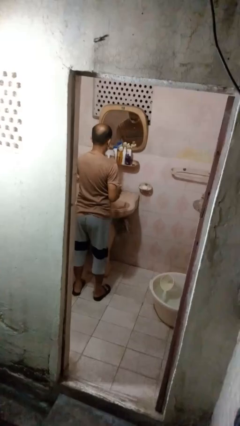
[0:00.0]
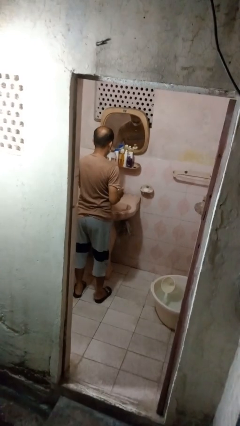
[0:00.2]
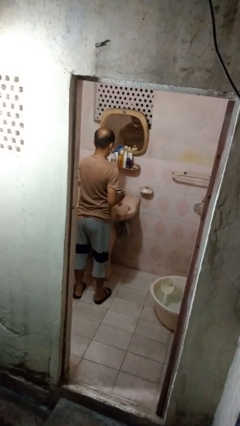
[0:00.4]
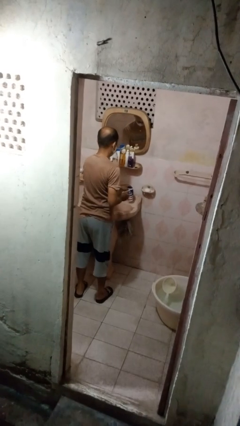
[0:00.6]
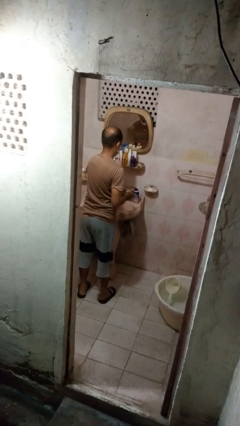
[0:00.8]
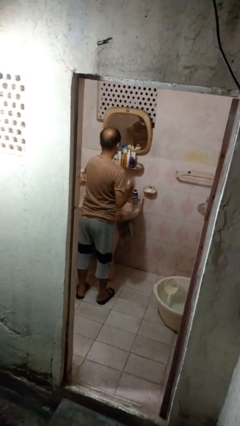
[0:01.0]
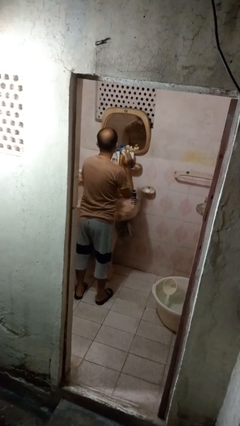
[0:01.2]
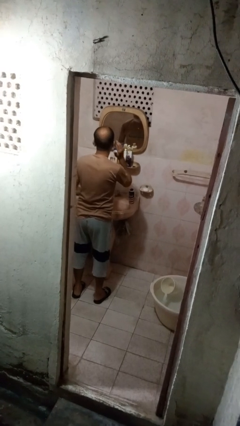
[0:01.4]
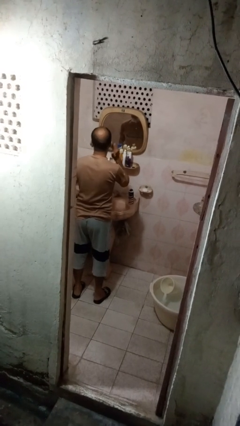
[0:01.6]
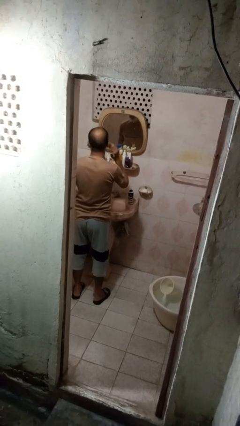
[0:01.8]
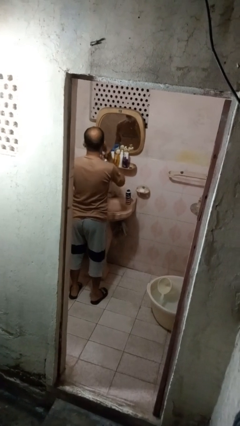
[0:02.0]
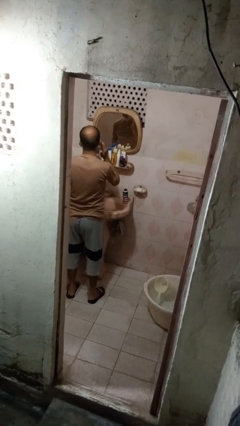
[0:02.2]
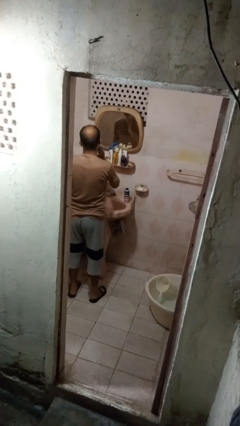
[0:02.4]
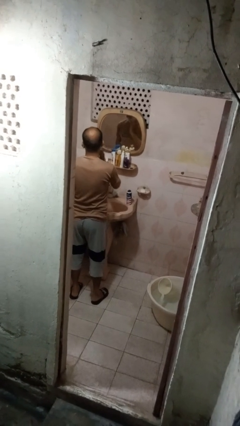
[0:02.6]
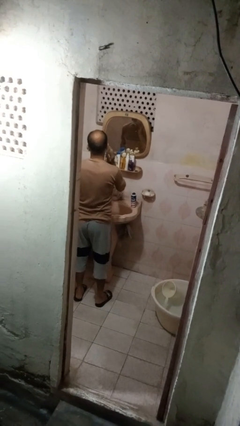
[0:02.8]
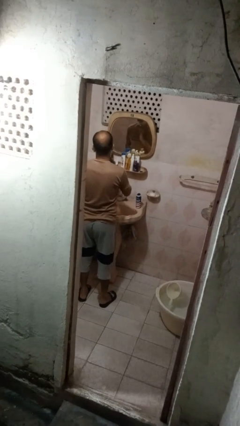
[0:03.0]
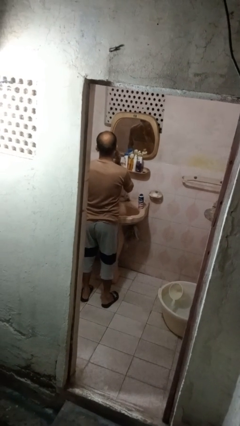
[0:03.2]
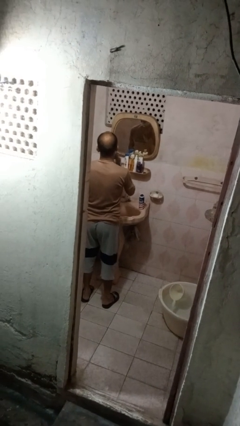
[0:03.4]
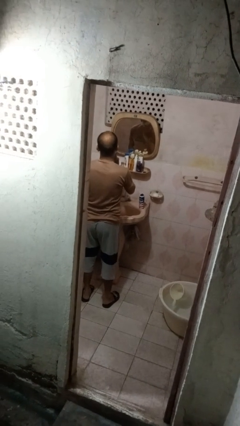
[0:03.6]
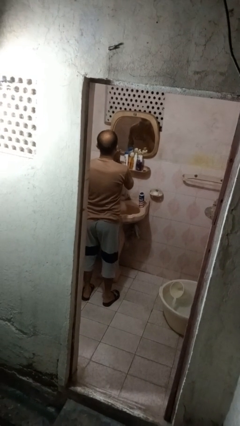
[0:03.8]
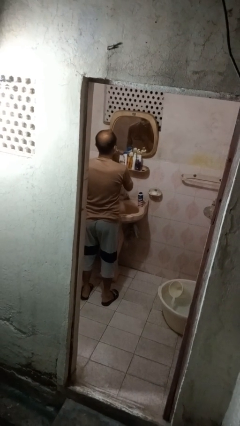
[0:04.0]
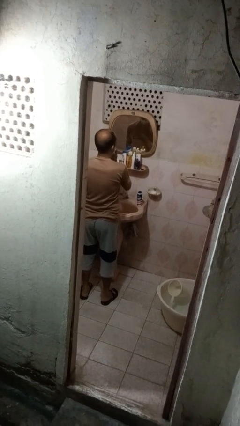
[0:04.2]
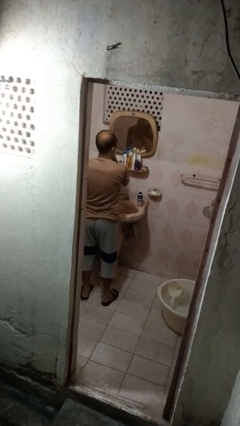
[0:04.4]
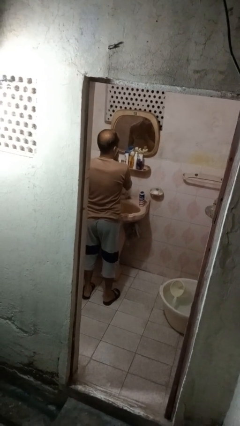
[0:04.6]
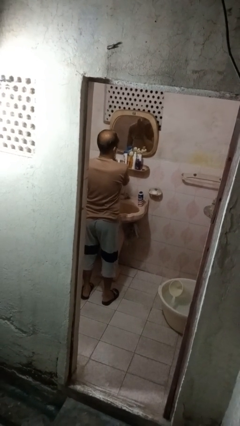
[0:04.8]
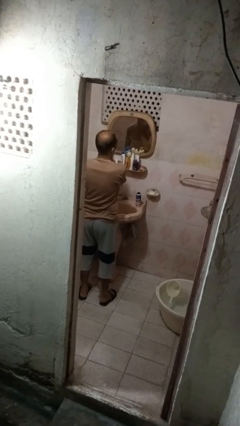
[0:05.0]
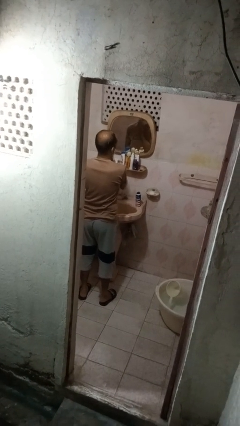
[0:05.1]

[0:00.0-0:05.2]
person applies shaving cream

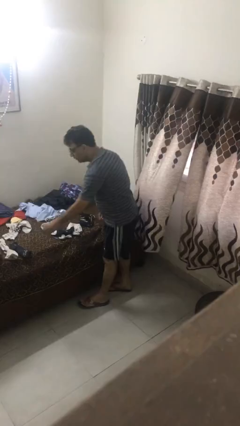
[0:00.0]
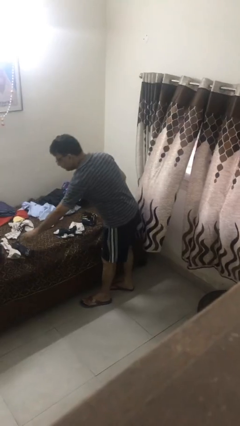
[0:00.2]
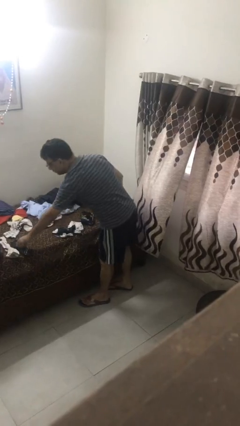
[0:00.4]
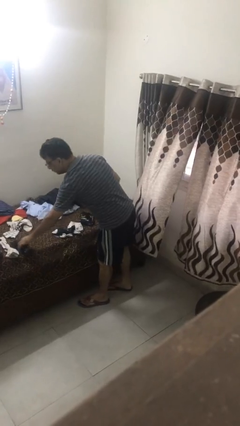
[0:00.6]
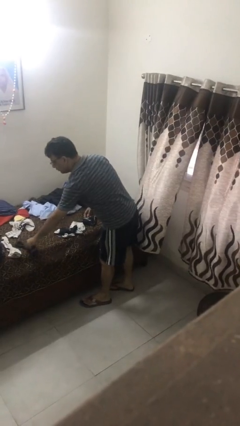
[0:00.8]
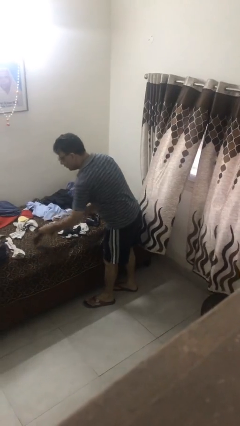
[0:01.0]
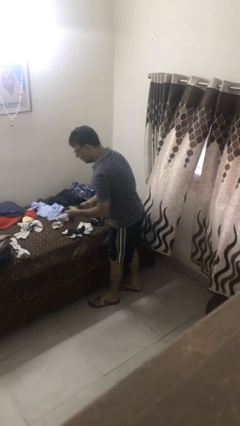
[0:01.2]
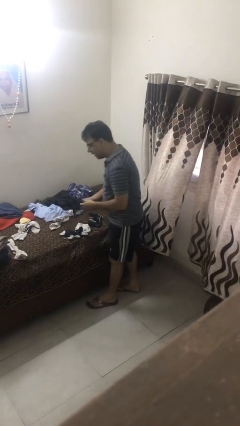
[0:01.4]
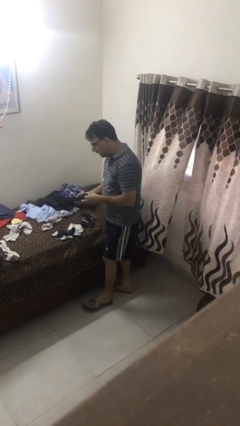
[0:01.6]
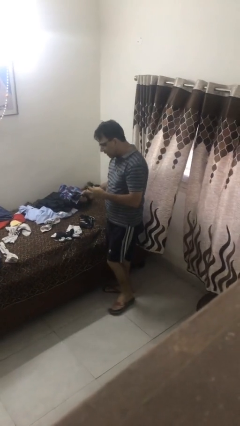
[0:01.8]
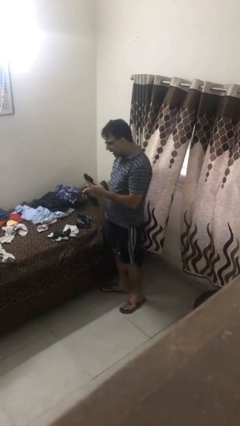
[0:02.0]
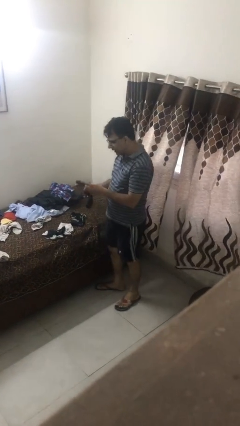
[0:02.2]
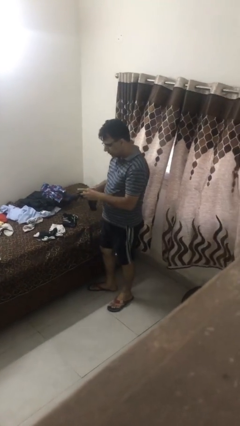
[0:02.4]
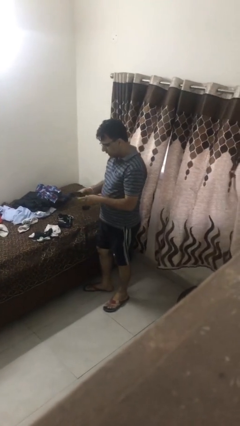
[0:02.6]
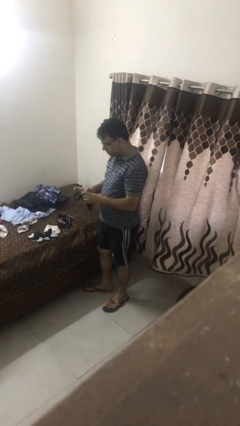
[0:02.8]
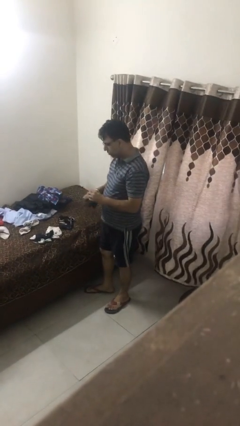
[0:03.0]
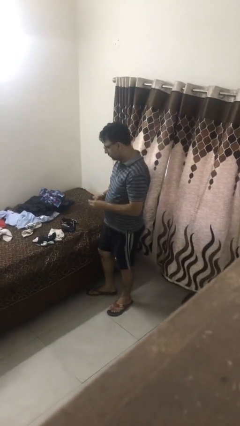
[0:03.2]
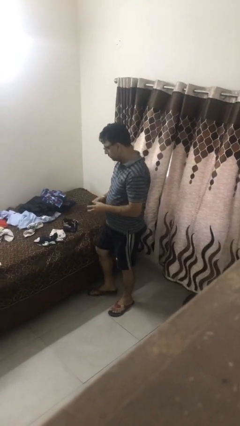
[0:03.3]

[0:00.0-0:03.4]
person folds socks

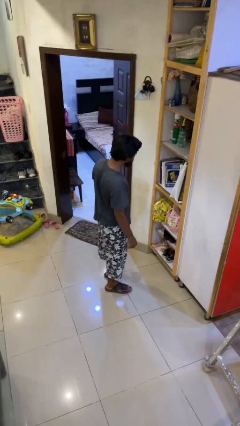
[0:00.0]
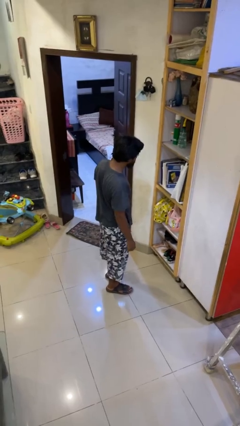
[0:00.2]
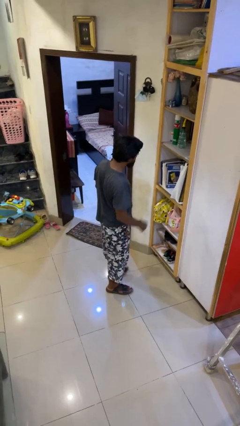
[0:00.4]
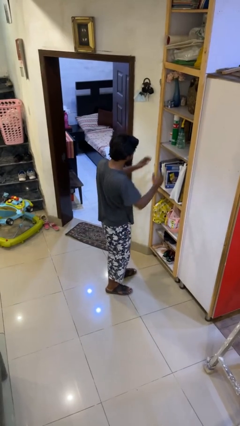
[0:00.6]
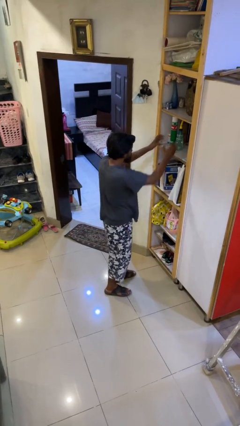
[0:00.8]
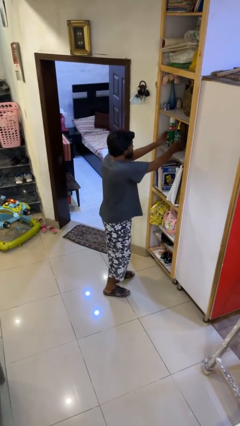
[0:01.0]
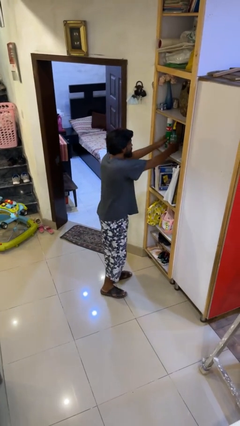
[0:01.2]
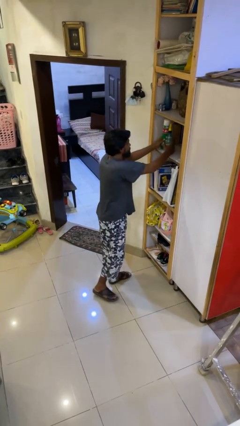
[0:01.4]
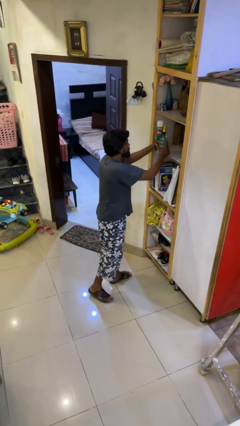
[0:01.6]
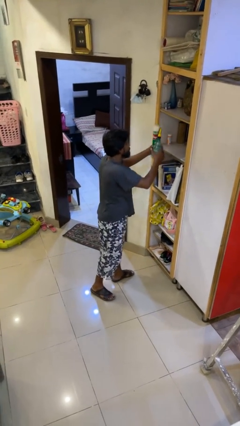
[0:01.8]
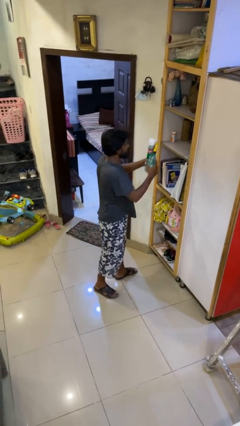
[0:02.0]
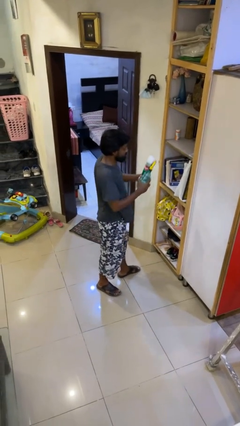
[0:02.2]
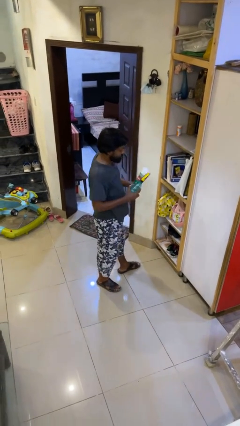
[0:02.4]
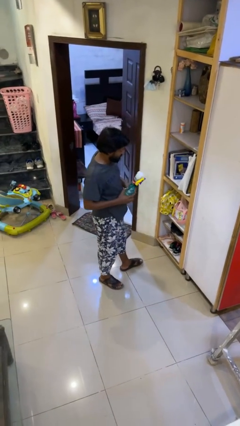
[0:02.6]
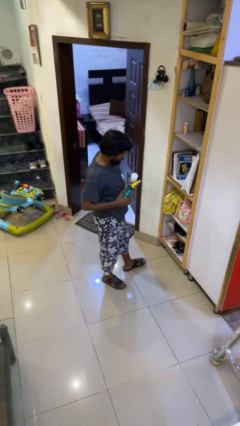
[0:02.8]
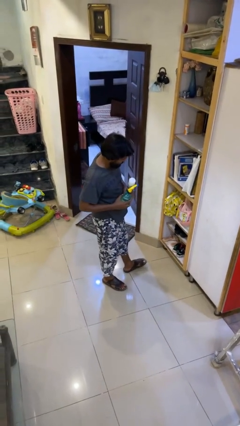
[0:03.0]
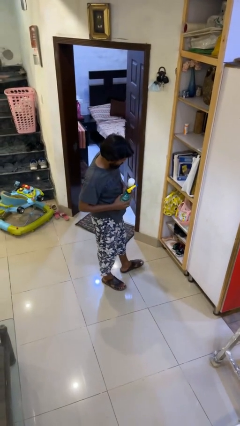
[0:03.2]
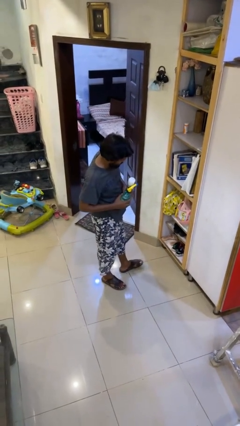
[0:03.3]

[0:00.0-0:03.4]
person picks up object from cabinet

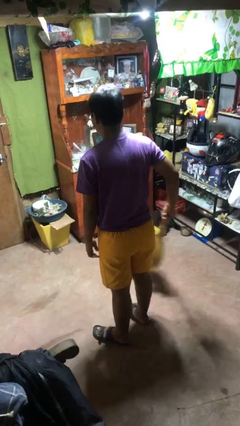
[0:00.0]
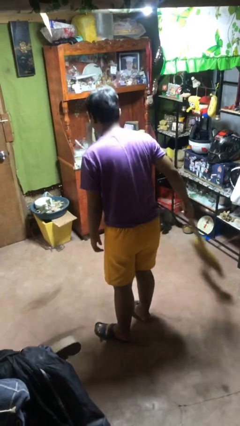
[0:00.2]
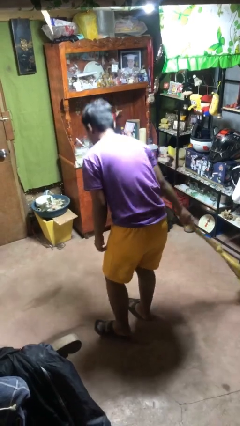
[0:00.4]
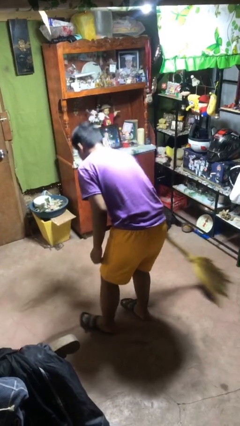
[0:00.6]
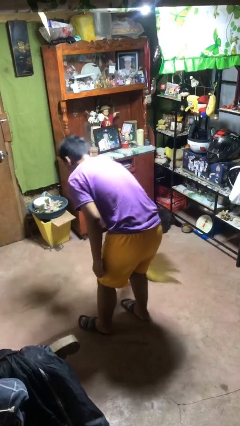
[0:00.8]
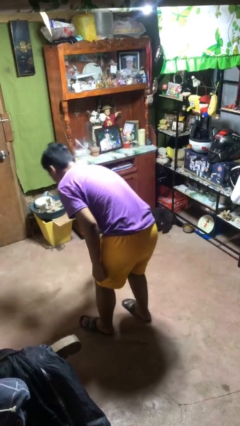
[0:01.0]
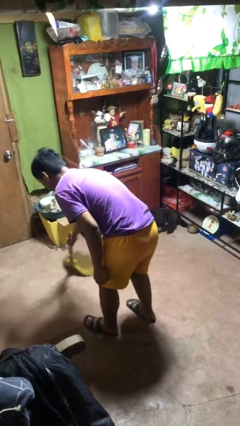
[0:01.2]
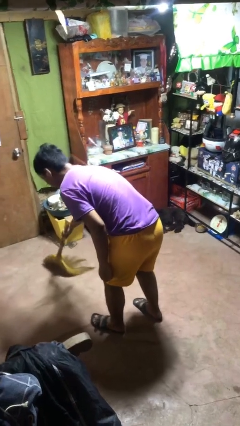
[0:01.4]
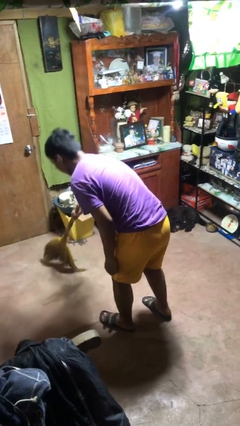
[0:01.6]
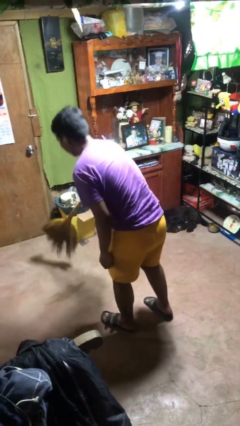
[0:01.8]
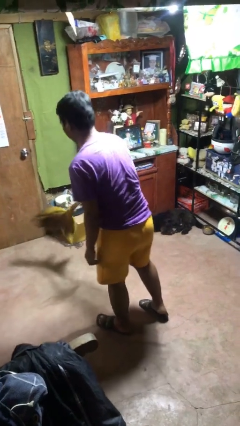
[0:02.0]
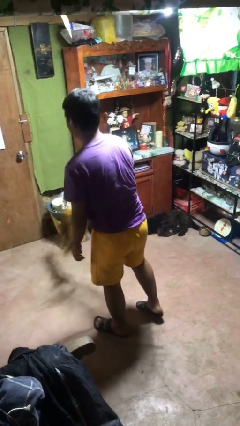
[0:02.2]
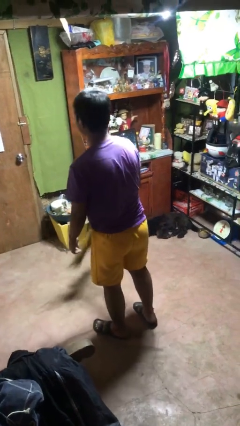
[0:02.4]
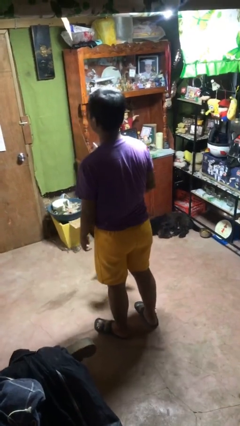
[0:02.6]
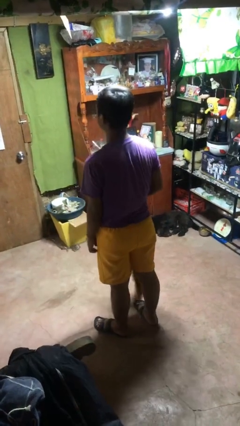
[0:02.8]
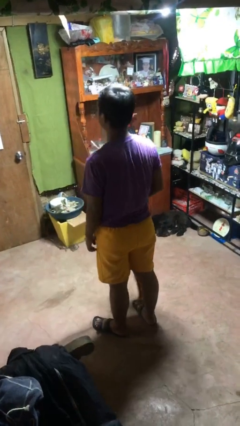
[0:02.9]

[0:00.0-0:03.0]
person sweeps floor

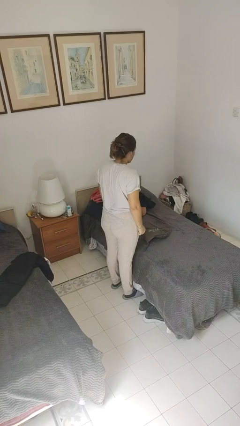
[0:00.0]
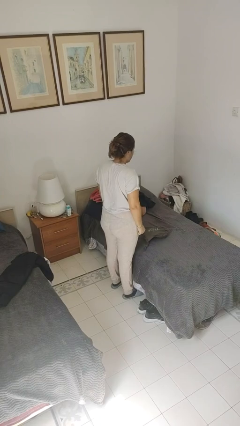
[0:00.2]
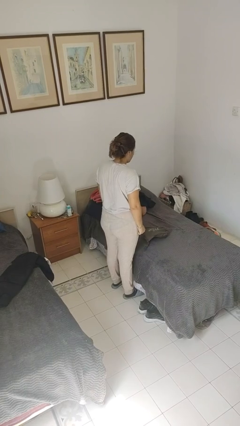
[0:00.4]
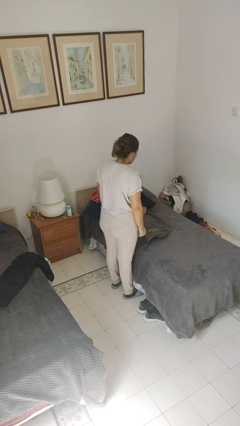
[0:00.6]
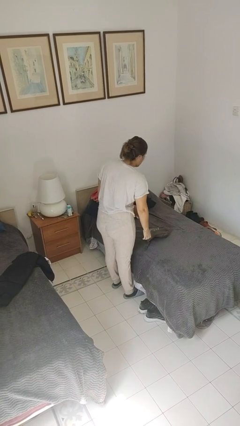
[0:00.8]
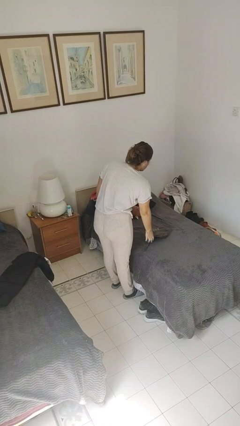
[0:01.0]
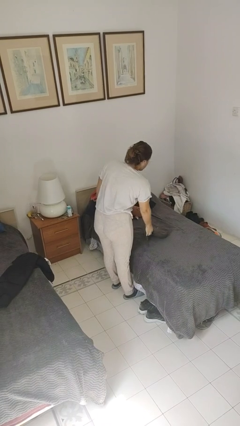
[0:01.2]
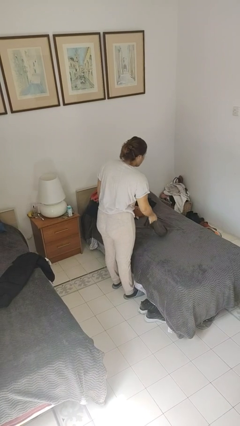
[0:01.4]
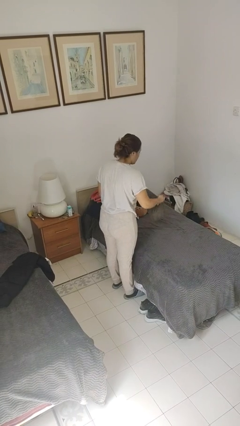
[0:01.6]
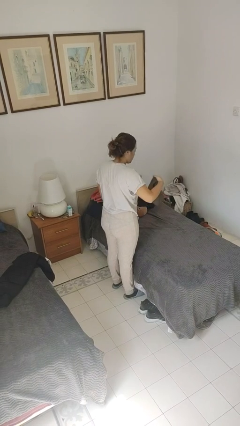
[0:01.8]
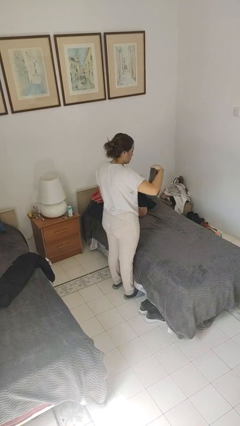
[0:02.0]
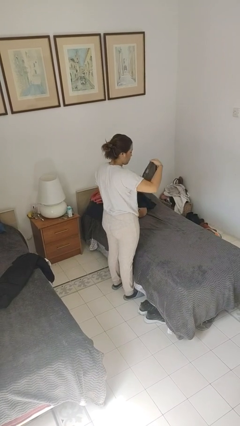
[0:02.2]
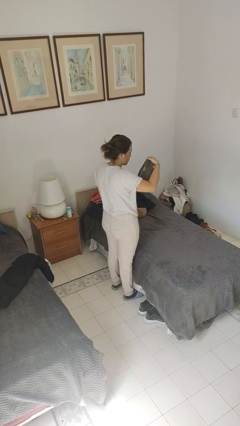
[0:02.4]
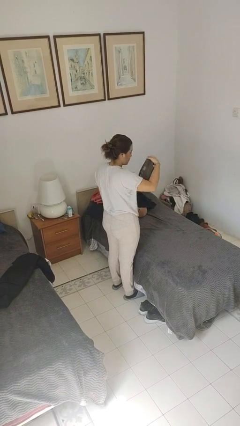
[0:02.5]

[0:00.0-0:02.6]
person picks up object from bed
